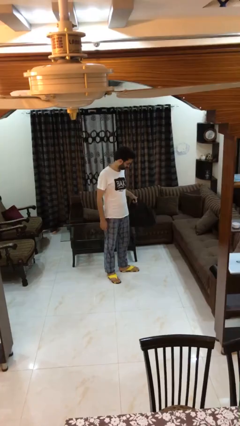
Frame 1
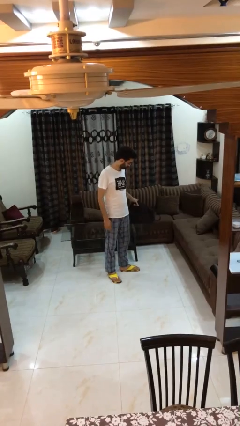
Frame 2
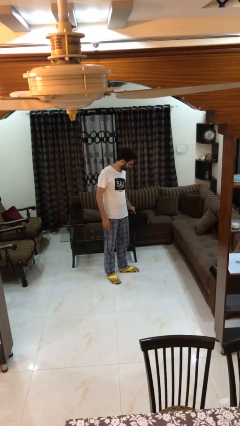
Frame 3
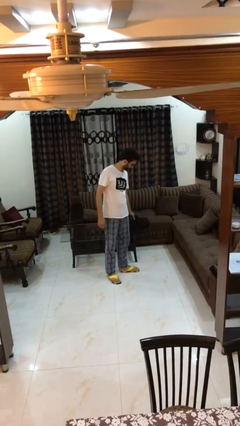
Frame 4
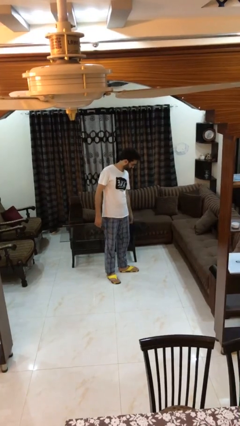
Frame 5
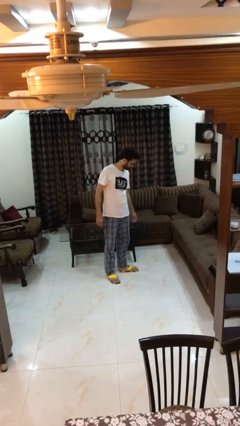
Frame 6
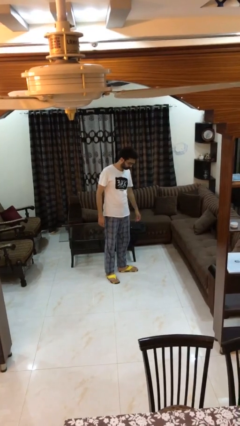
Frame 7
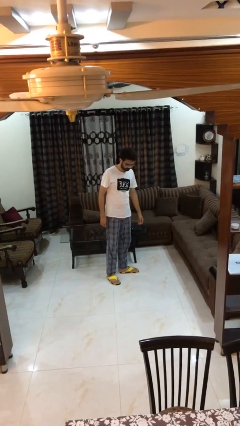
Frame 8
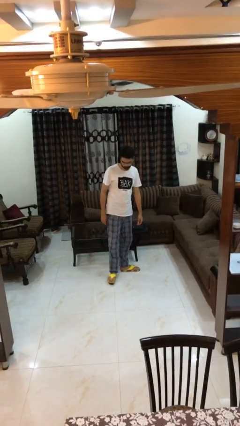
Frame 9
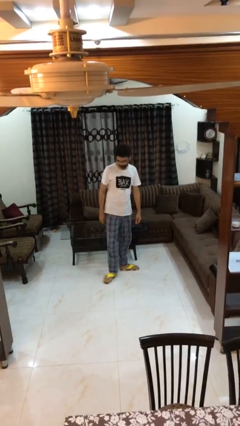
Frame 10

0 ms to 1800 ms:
person puts down object on table

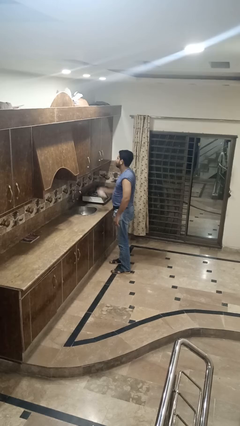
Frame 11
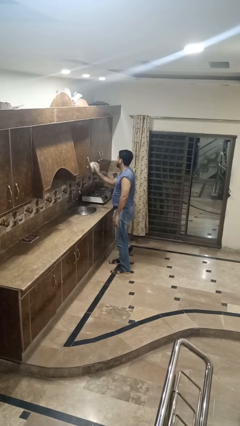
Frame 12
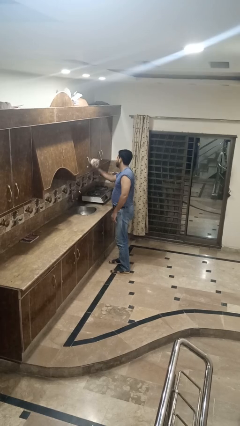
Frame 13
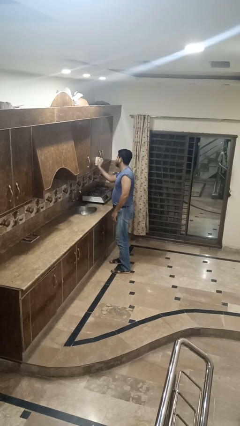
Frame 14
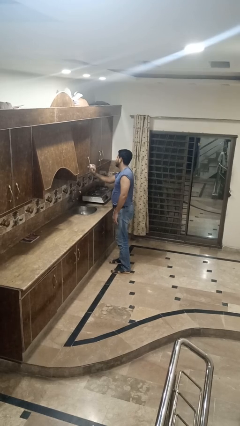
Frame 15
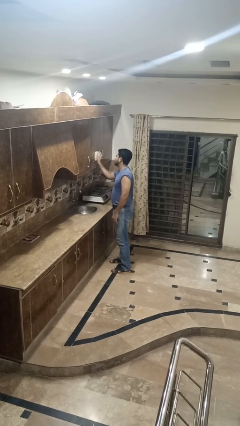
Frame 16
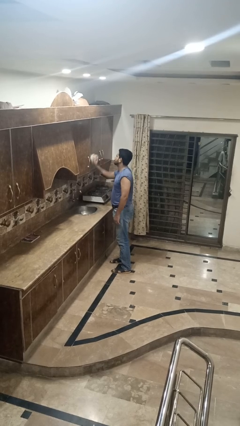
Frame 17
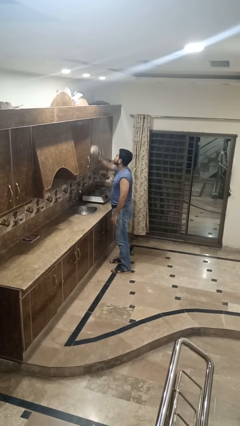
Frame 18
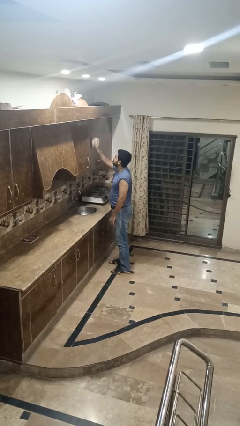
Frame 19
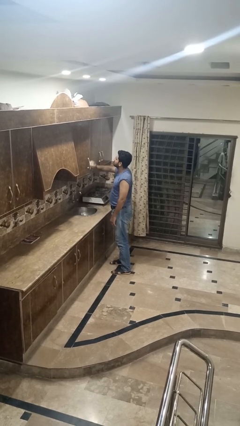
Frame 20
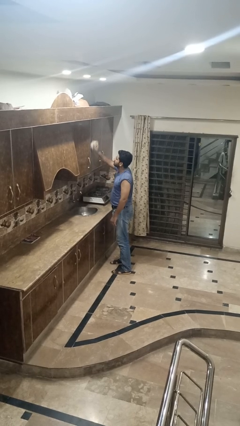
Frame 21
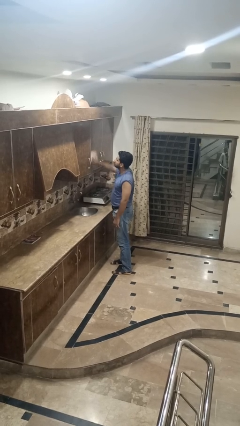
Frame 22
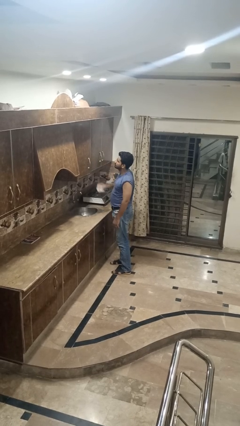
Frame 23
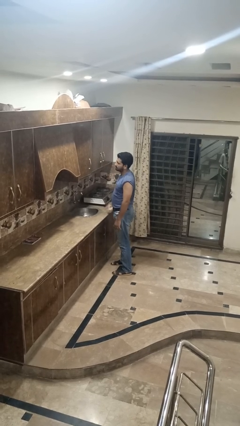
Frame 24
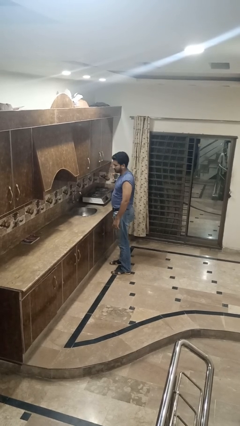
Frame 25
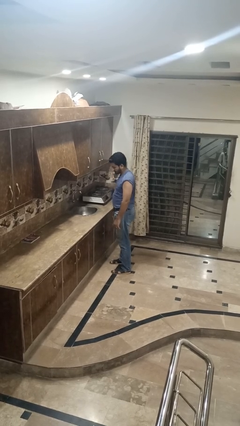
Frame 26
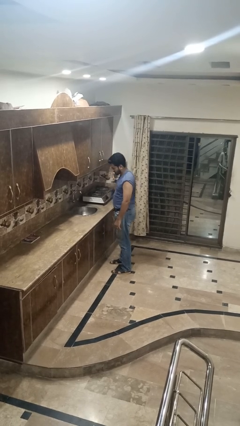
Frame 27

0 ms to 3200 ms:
person dusts furniture

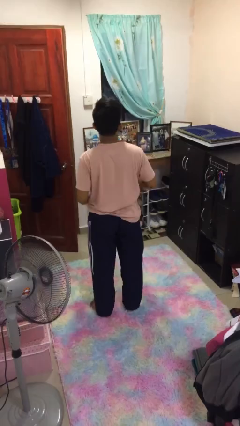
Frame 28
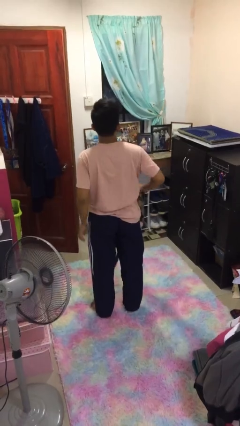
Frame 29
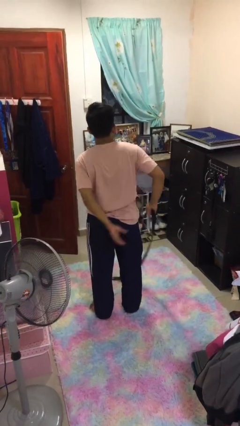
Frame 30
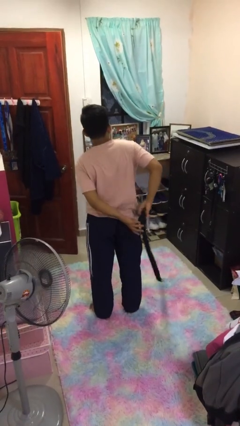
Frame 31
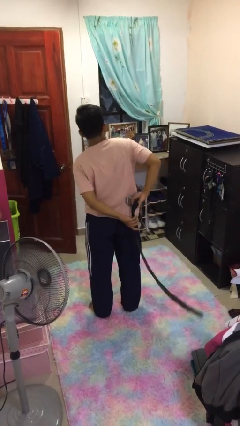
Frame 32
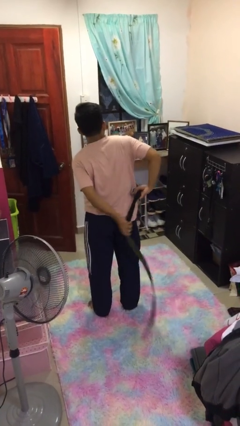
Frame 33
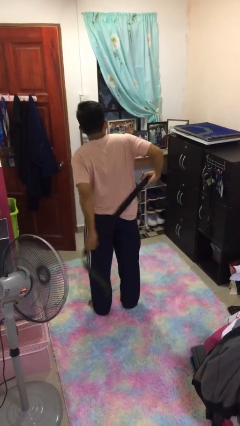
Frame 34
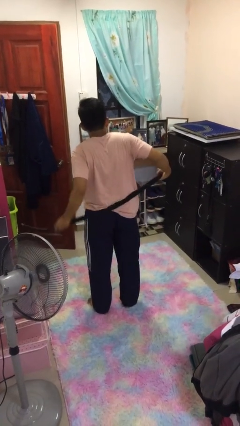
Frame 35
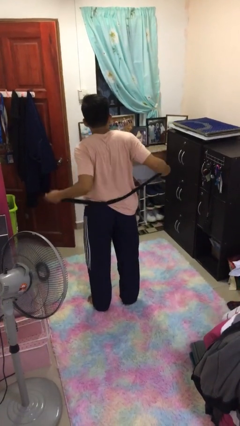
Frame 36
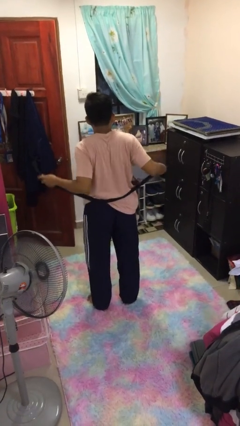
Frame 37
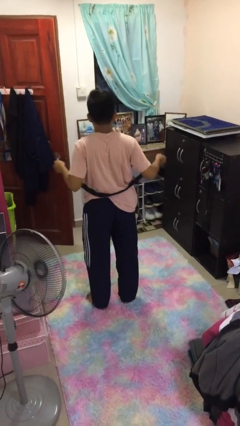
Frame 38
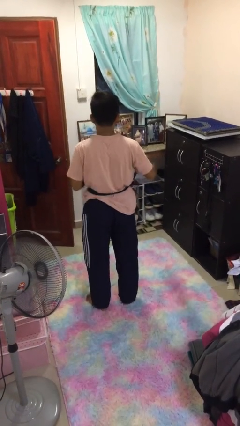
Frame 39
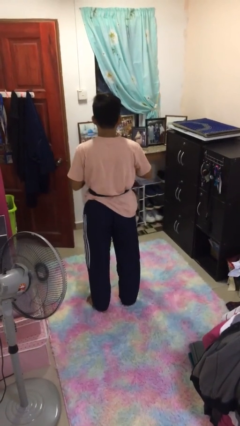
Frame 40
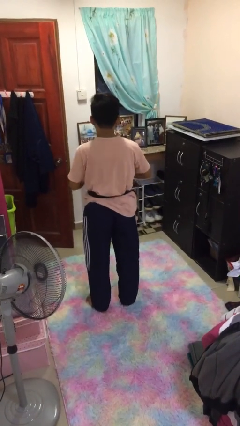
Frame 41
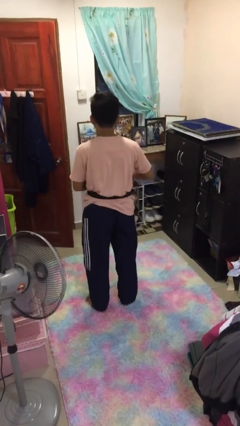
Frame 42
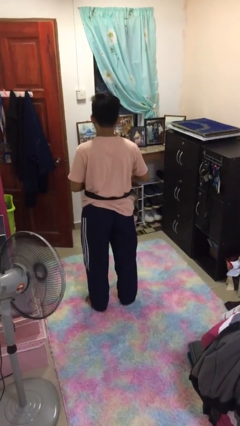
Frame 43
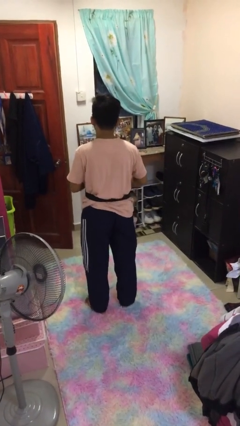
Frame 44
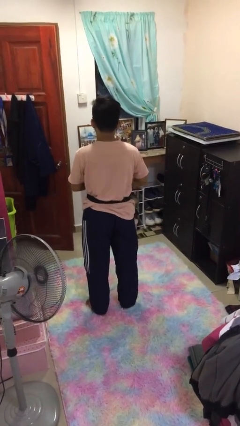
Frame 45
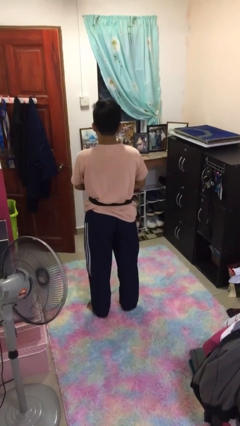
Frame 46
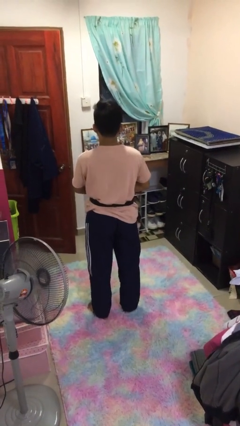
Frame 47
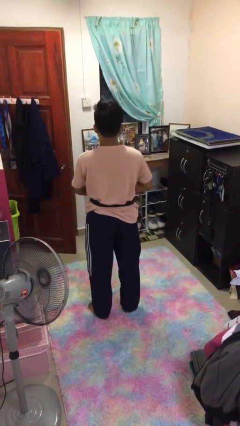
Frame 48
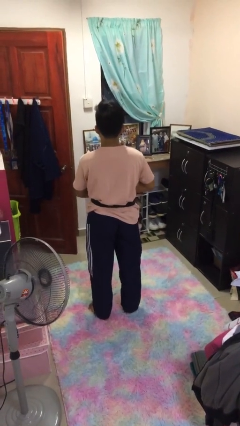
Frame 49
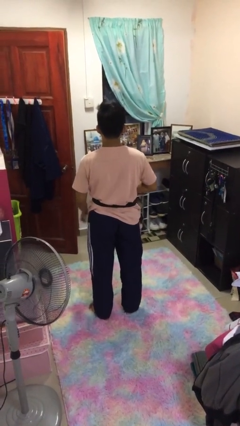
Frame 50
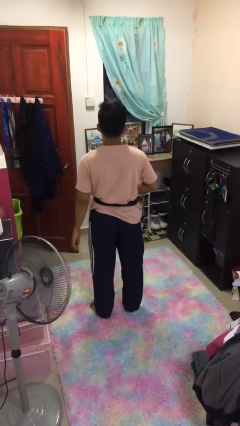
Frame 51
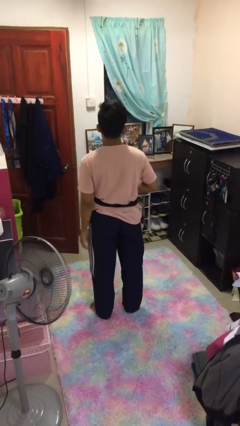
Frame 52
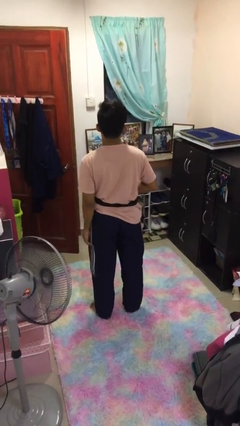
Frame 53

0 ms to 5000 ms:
person puts on belt

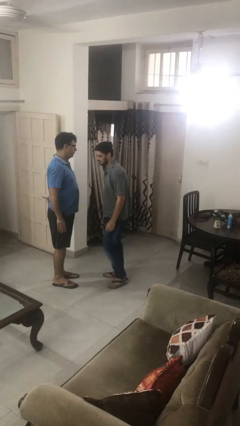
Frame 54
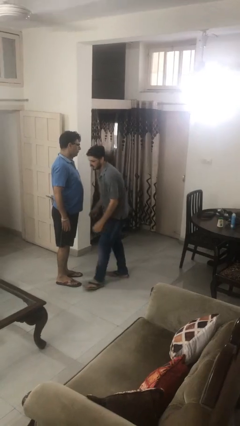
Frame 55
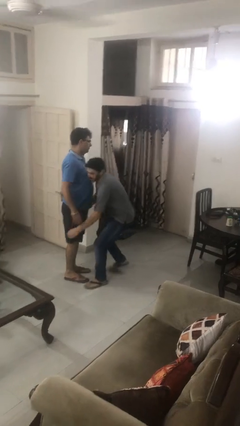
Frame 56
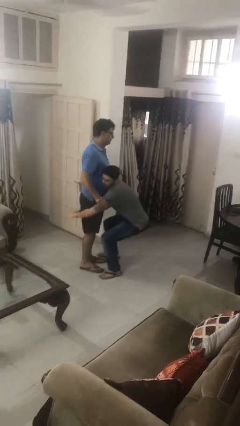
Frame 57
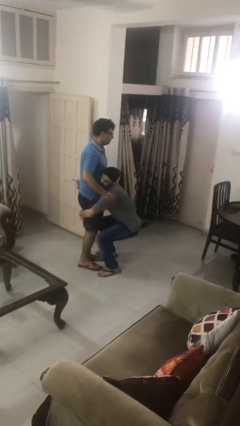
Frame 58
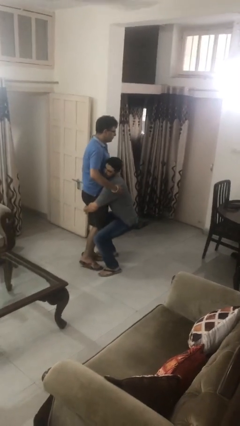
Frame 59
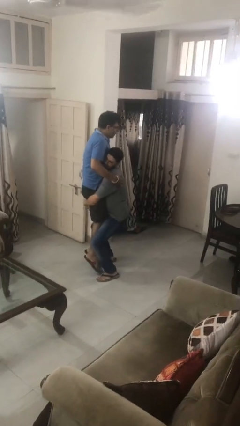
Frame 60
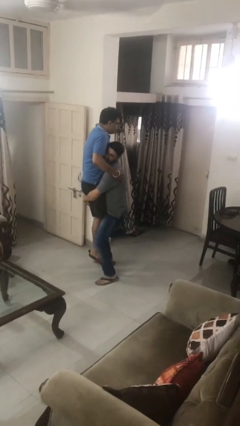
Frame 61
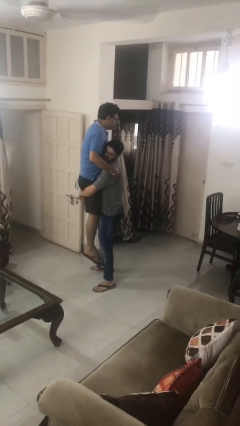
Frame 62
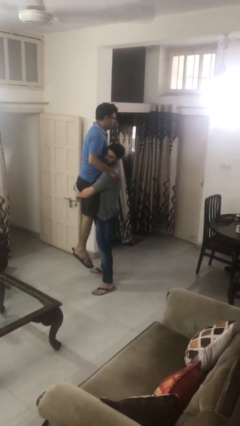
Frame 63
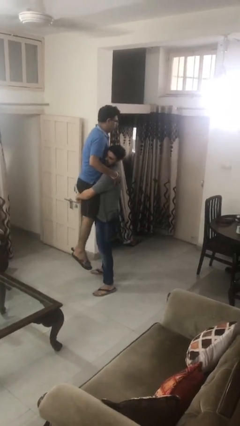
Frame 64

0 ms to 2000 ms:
person picks up person

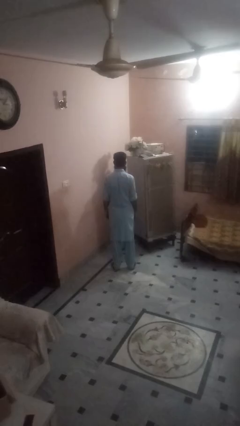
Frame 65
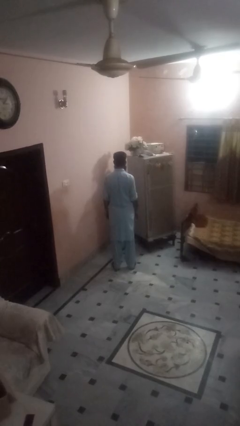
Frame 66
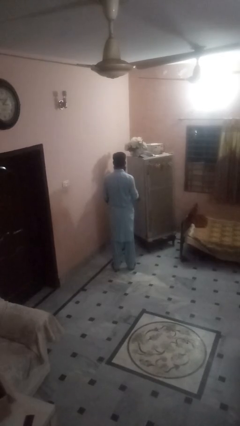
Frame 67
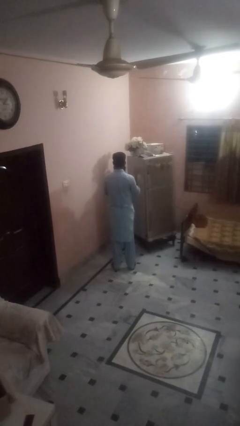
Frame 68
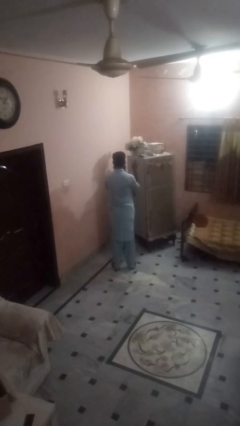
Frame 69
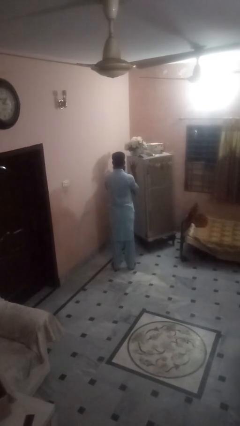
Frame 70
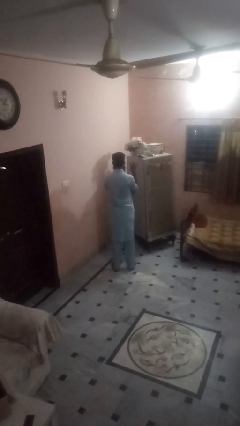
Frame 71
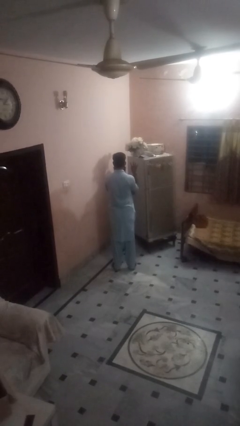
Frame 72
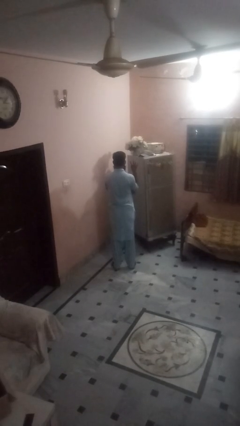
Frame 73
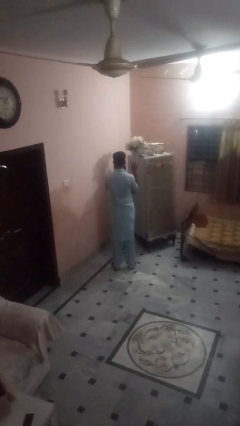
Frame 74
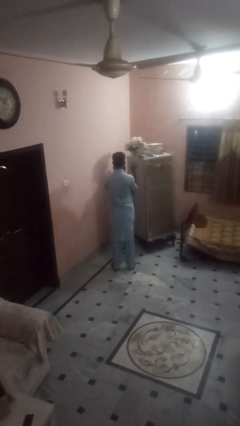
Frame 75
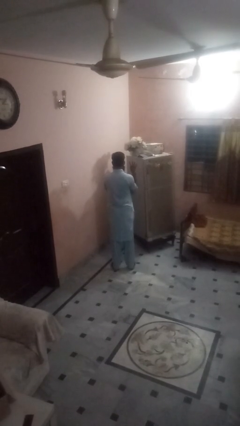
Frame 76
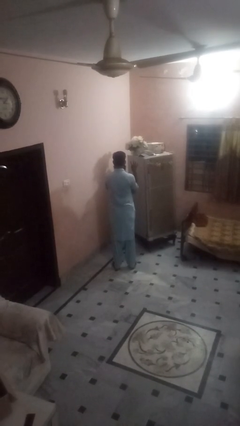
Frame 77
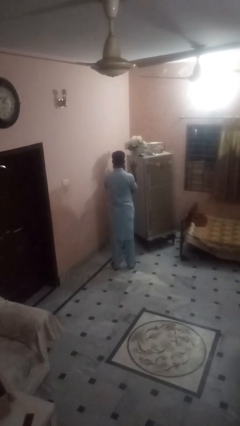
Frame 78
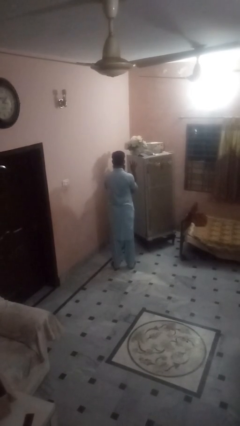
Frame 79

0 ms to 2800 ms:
person gestures number four

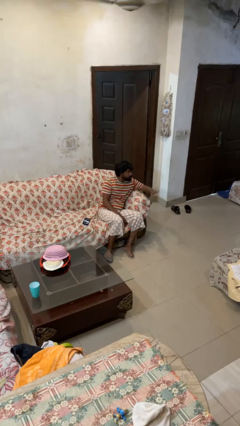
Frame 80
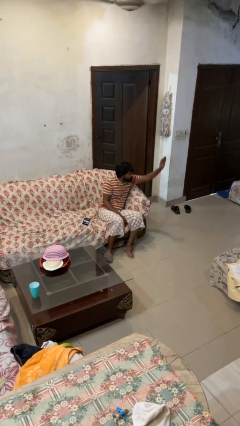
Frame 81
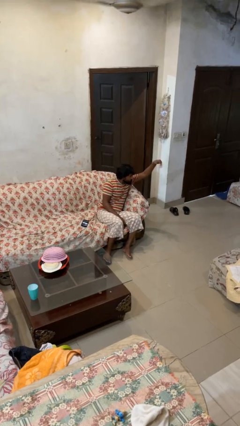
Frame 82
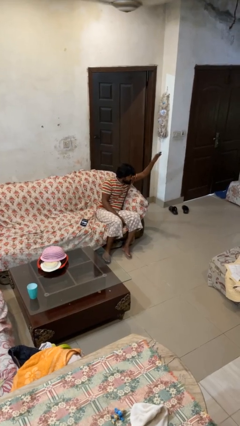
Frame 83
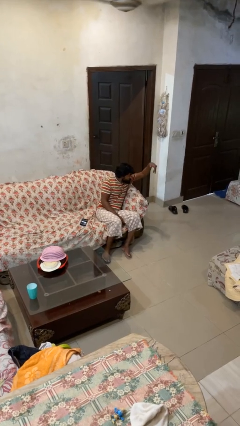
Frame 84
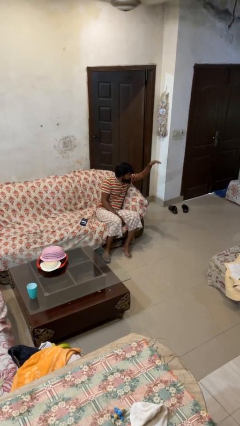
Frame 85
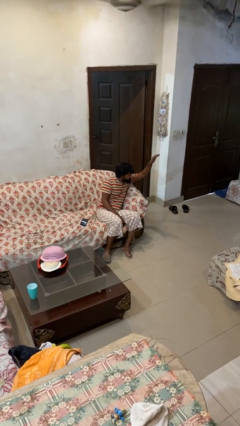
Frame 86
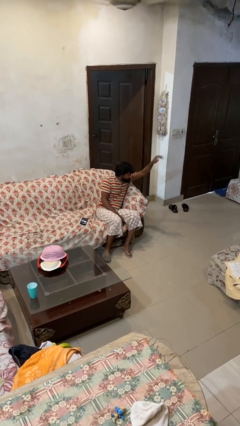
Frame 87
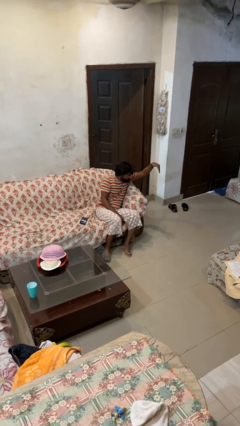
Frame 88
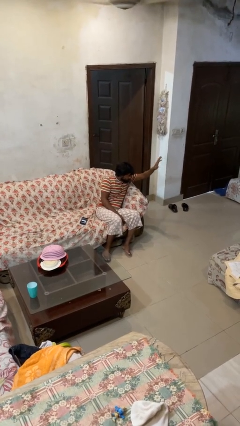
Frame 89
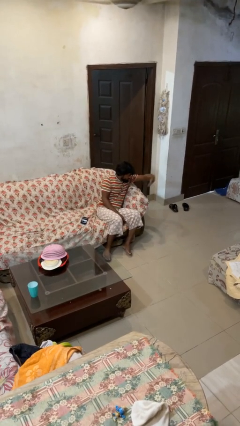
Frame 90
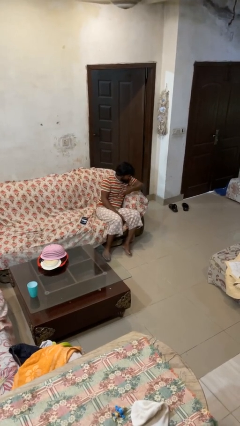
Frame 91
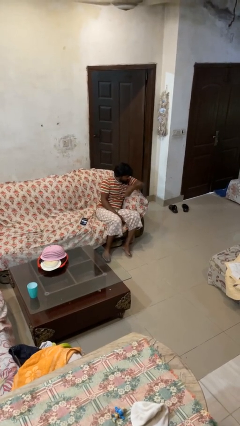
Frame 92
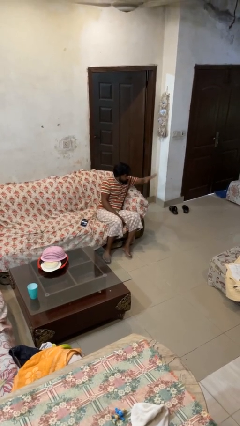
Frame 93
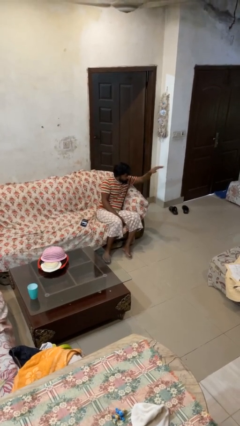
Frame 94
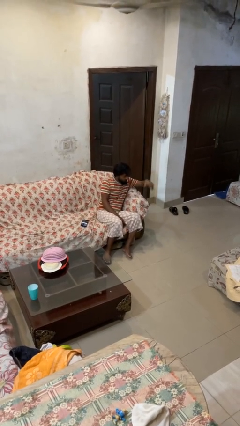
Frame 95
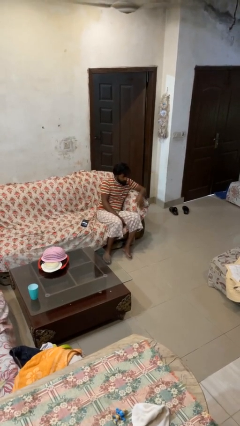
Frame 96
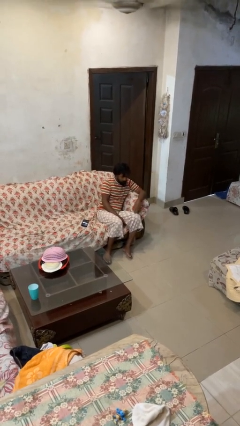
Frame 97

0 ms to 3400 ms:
person gestures come here
